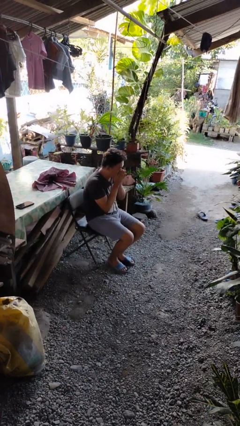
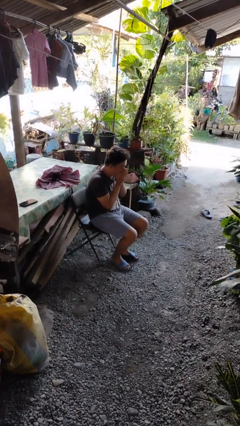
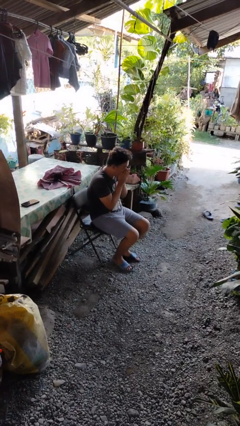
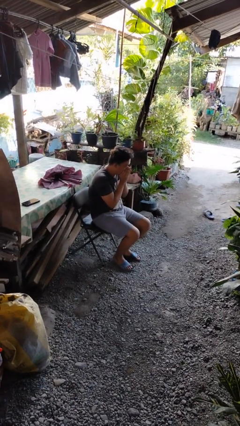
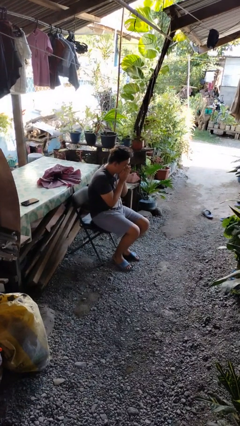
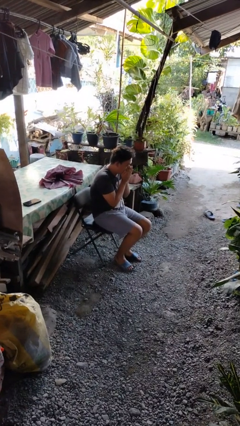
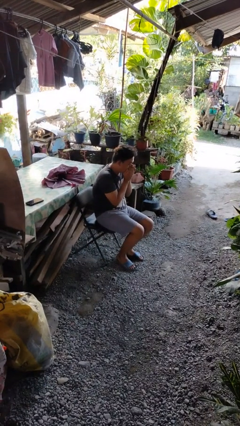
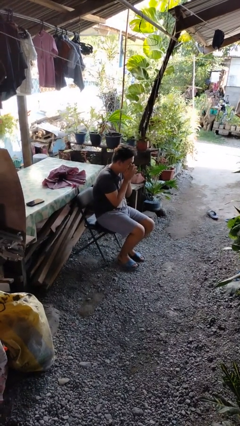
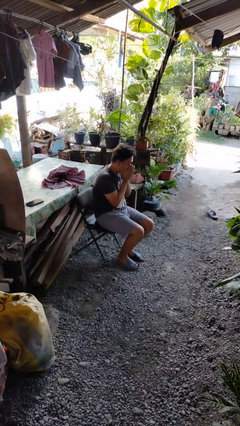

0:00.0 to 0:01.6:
person blows into hands

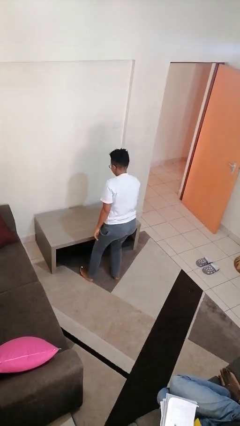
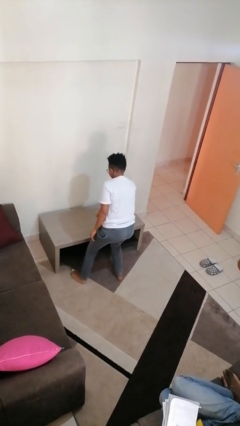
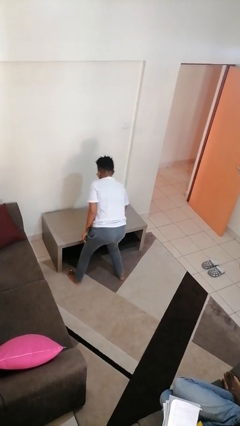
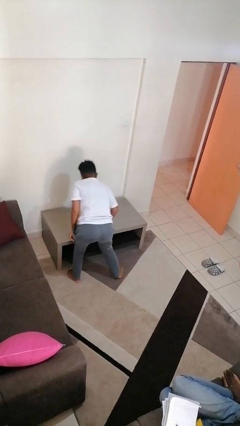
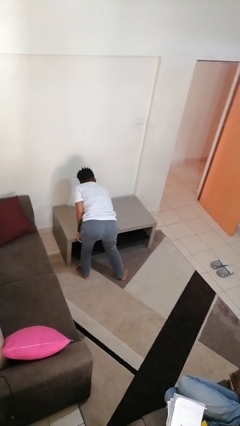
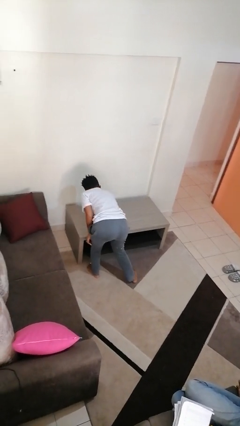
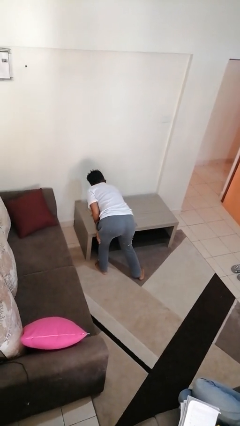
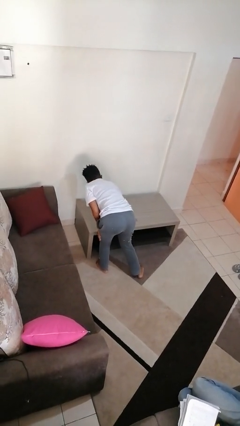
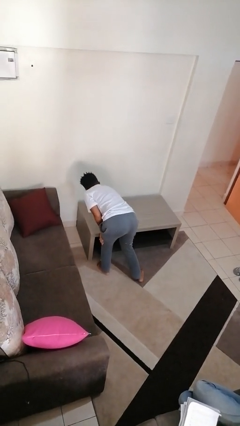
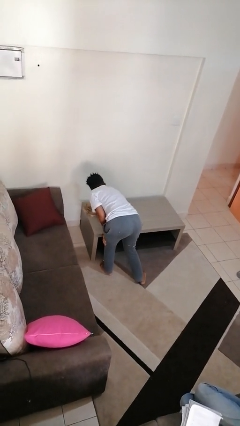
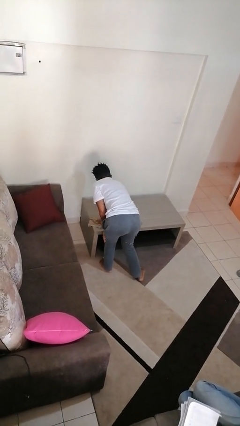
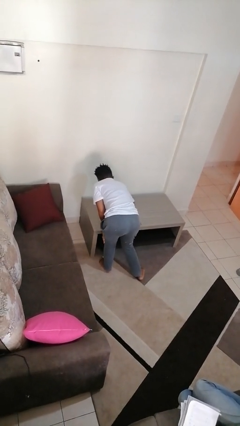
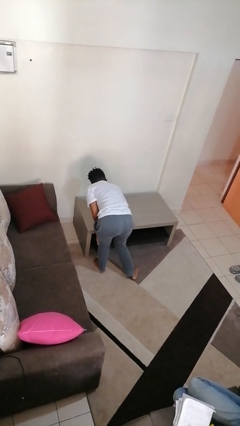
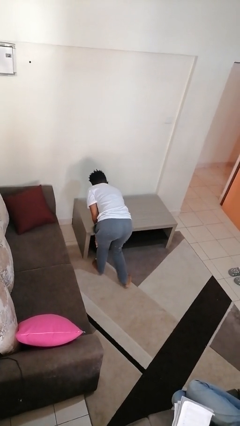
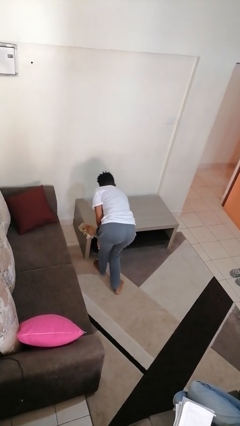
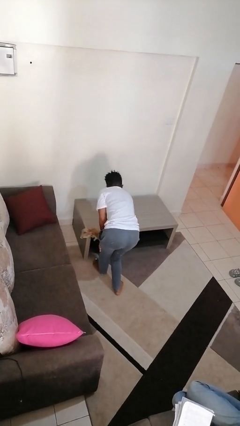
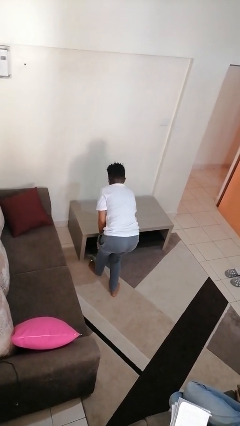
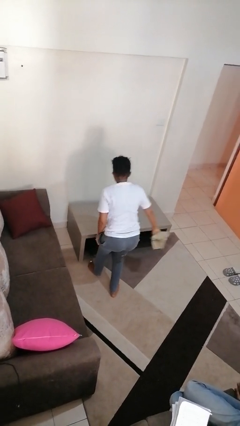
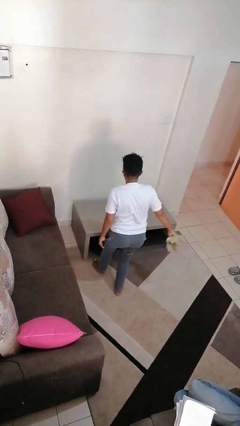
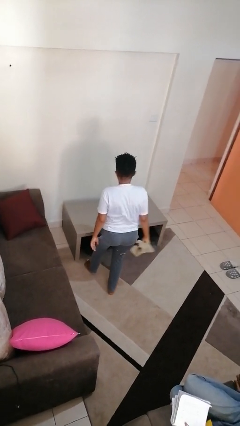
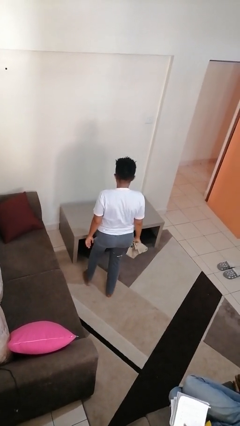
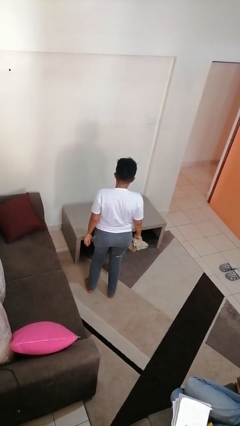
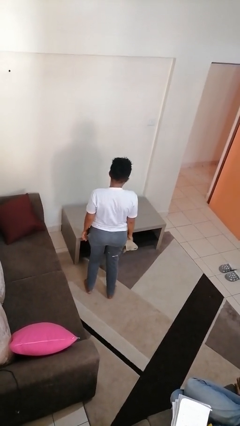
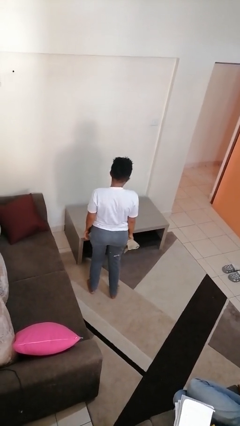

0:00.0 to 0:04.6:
person cleans table with rag

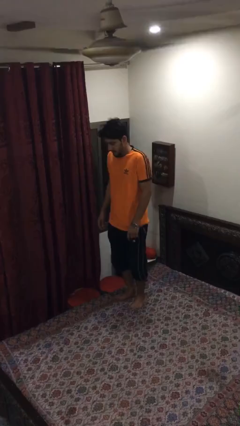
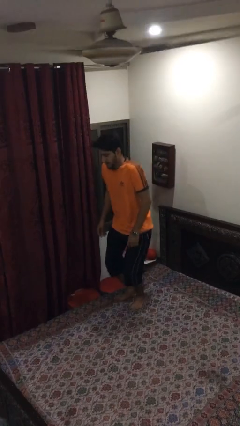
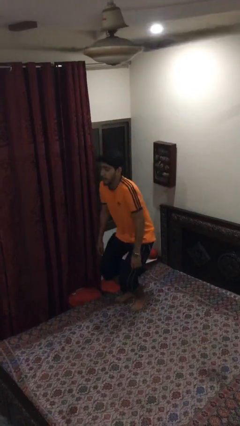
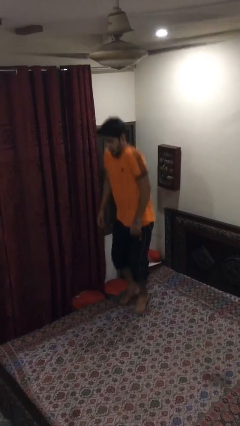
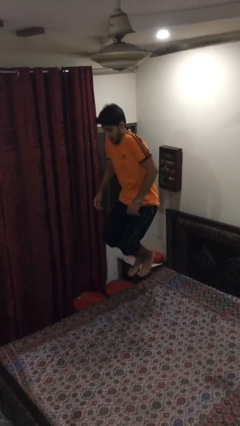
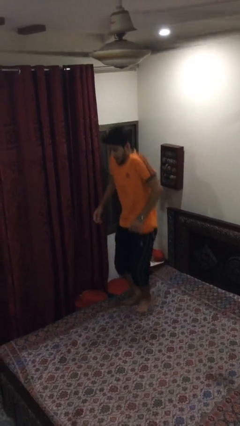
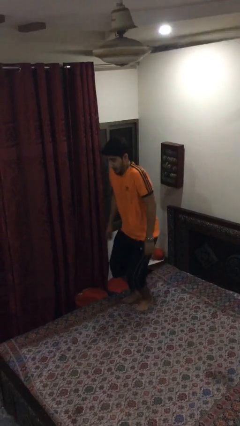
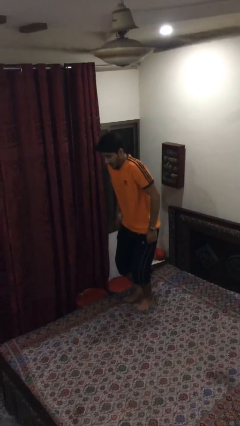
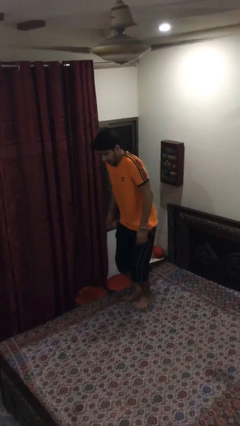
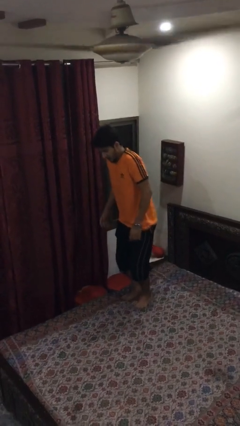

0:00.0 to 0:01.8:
person jumps on bed

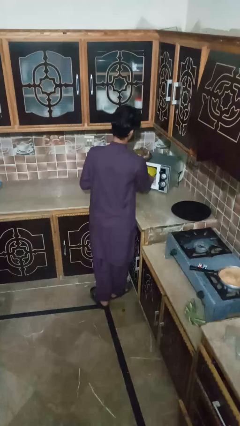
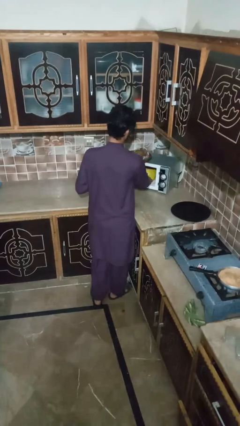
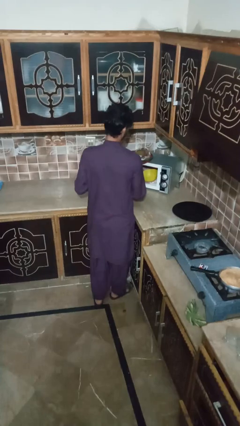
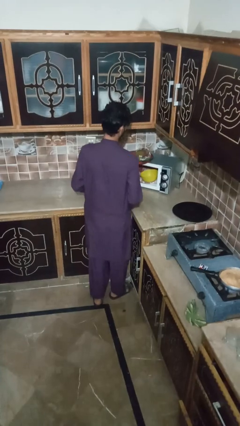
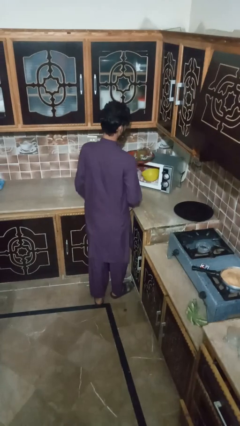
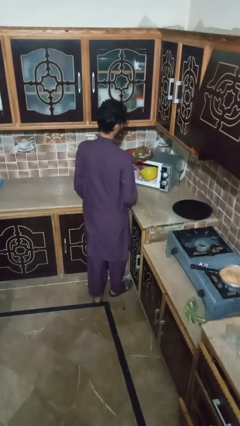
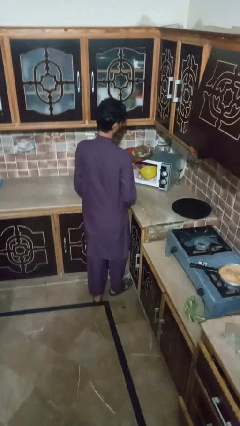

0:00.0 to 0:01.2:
person puts object into microwave

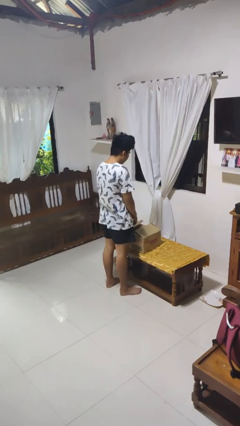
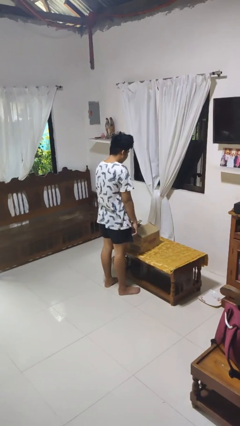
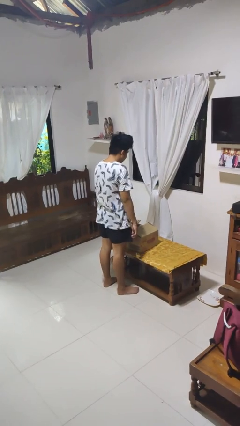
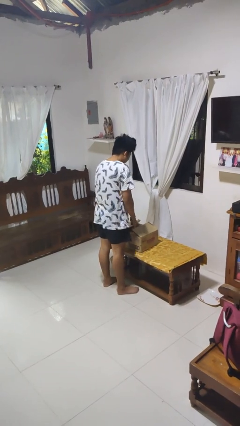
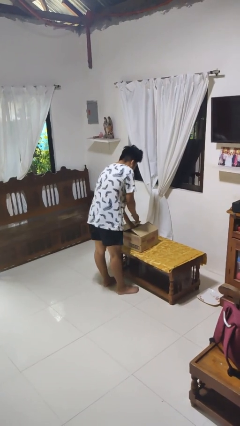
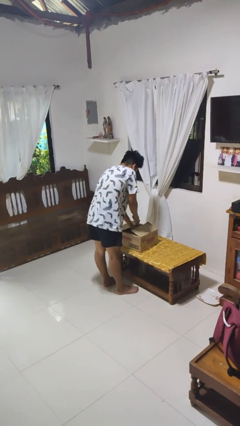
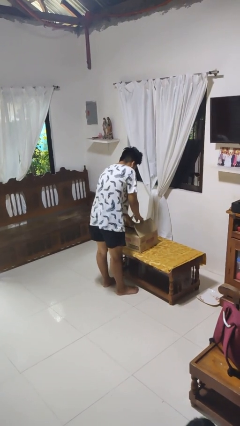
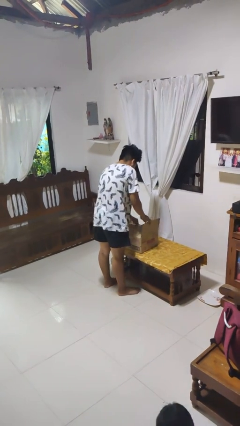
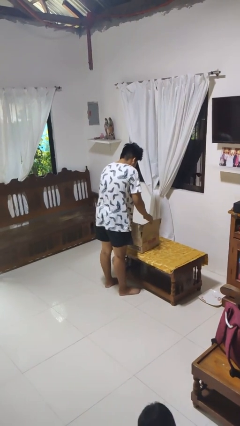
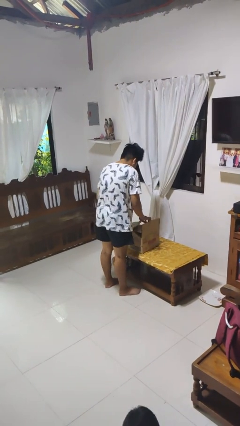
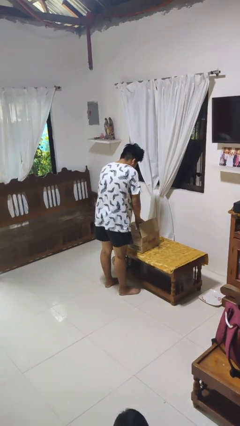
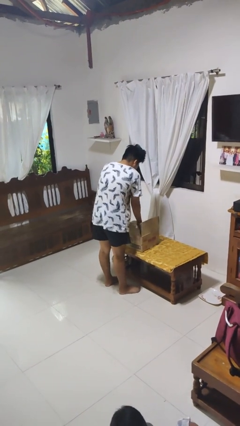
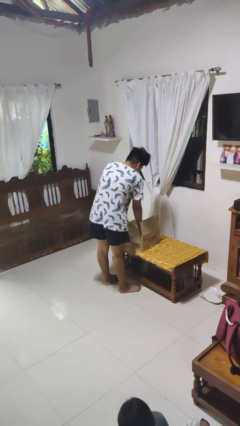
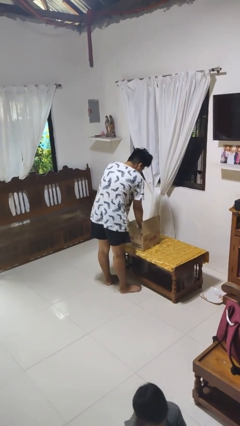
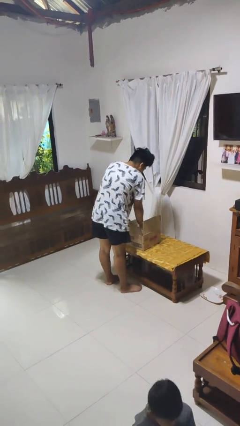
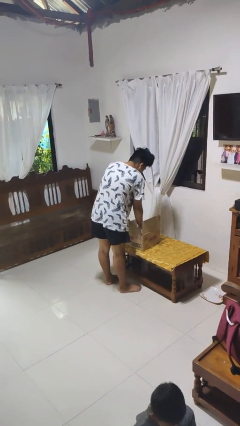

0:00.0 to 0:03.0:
person searches in box

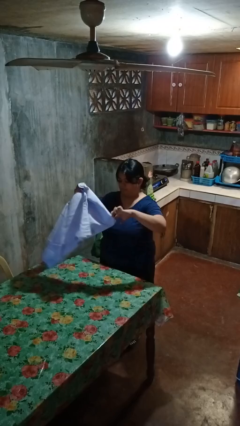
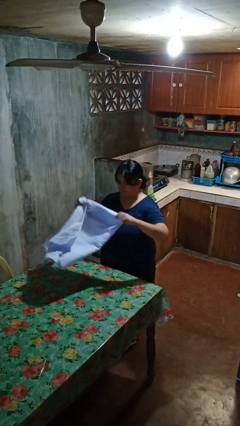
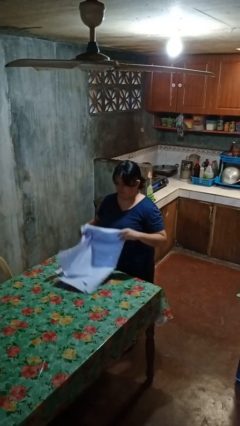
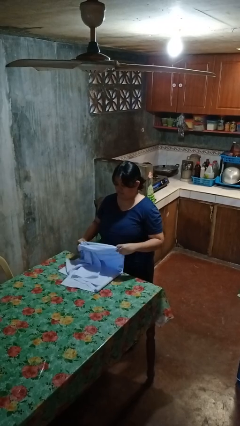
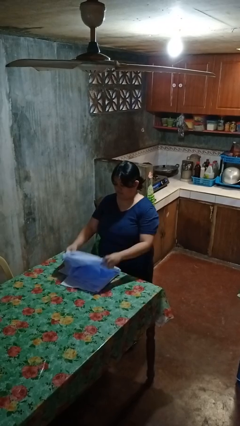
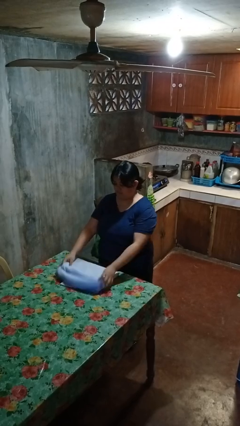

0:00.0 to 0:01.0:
person folds tablecloth

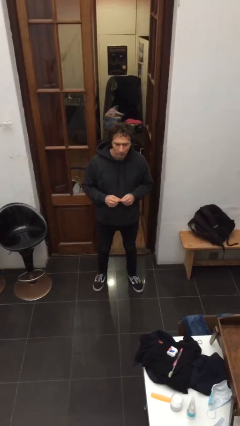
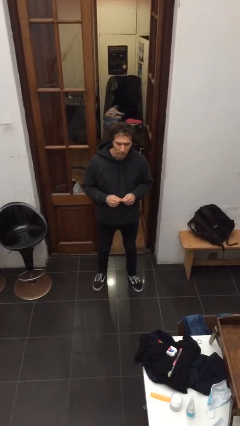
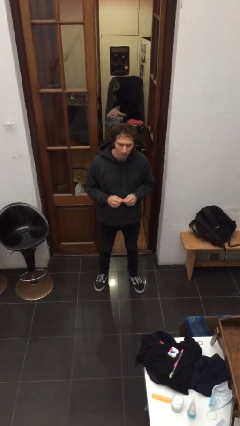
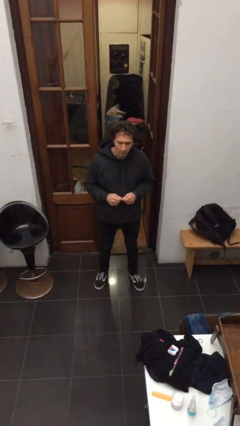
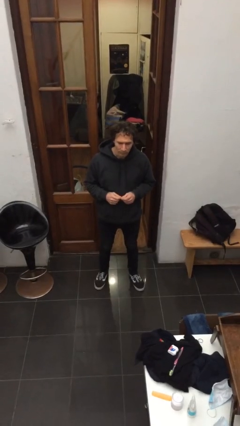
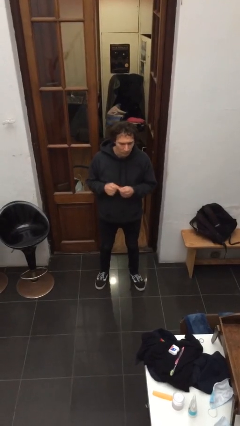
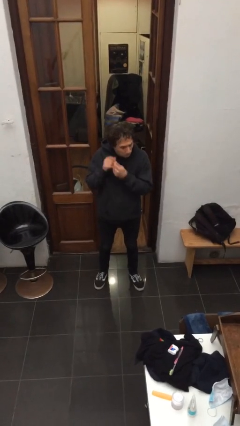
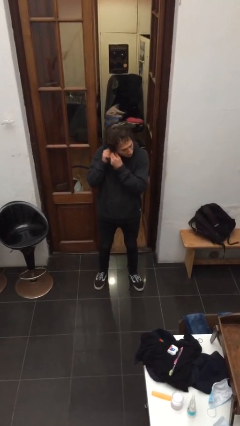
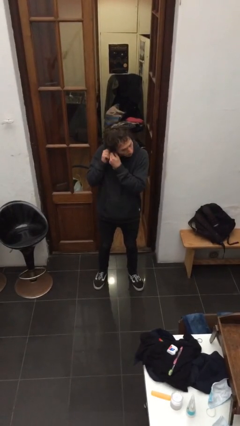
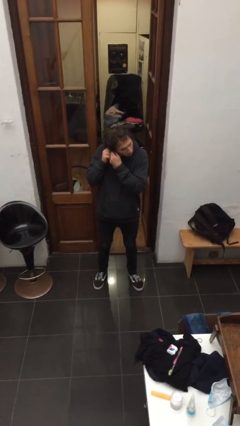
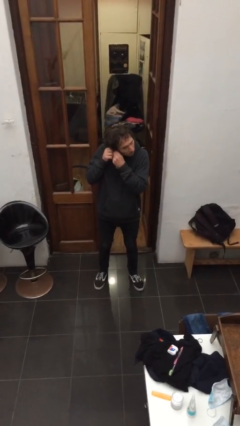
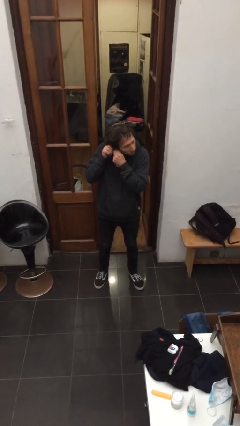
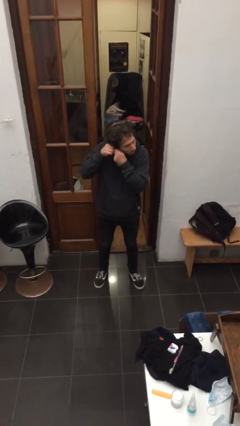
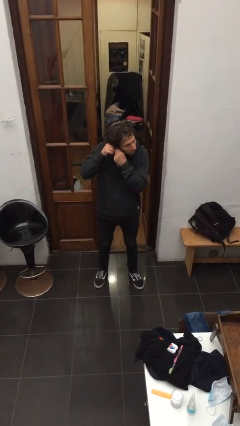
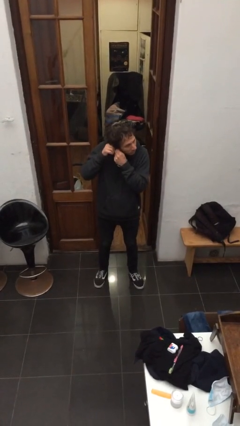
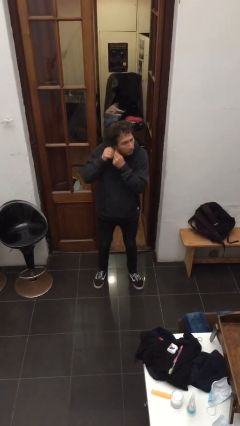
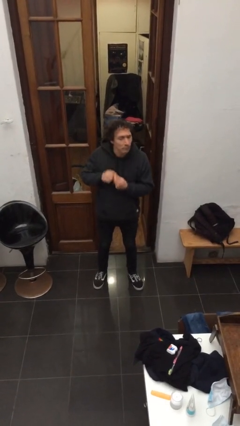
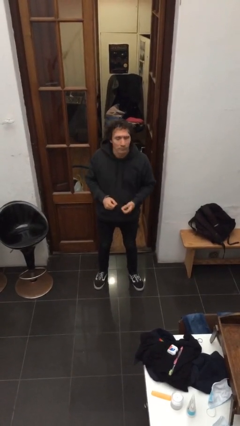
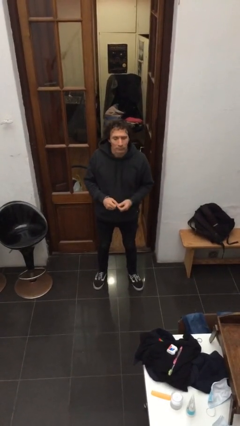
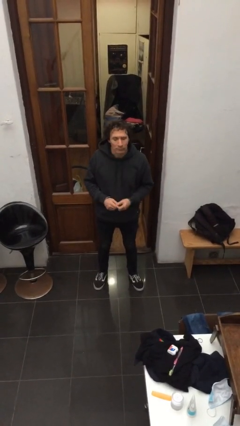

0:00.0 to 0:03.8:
person puts on earrings

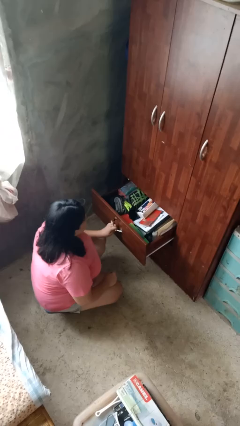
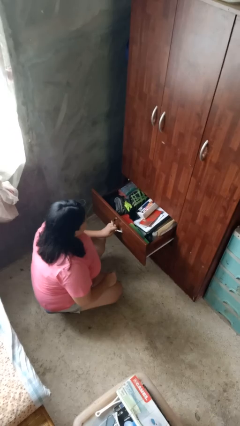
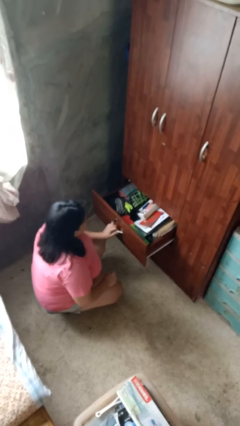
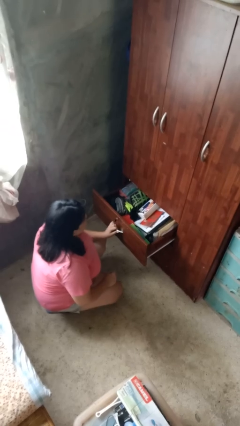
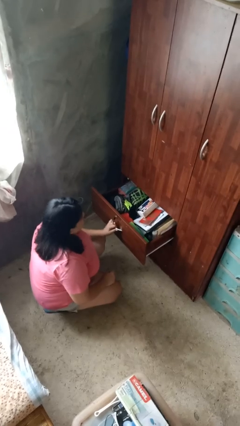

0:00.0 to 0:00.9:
person closes dresser drawer
